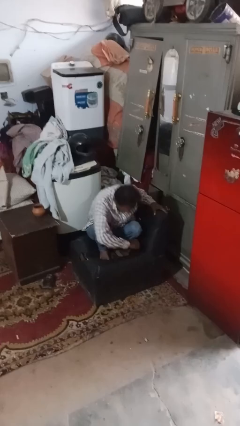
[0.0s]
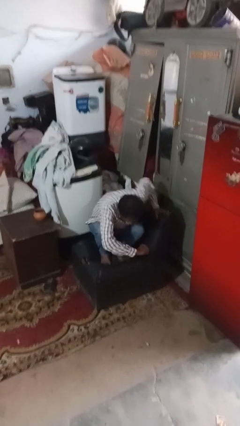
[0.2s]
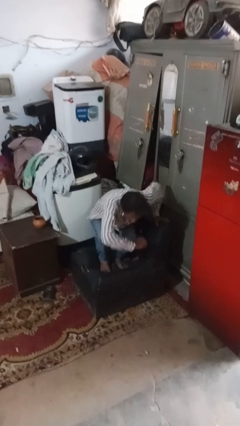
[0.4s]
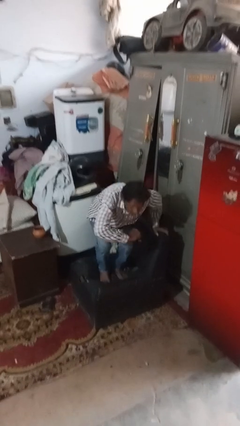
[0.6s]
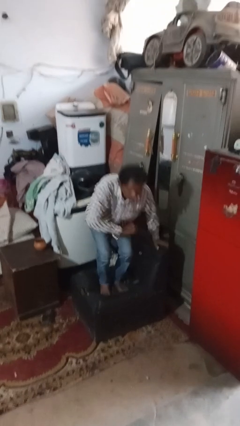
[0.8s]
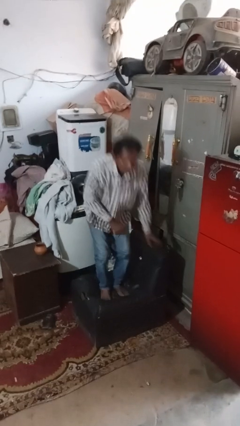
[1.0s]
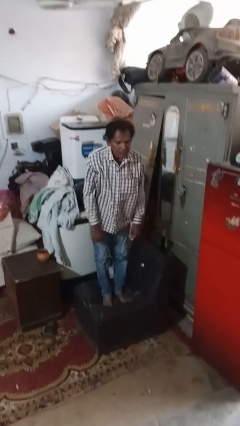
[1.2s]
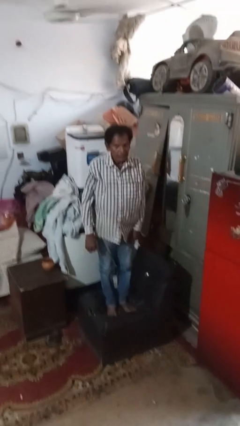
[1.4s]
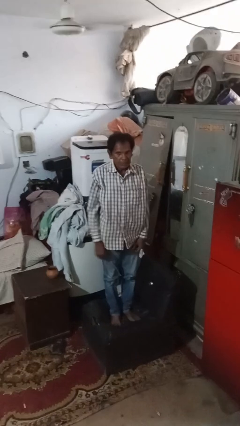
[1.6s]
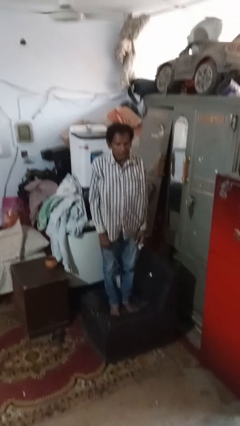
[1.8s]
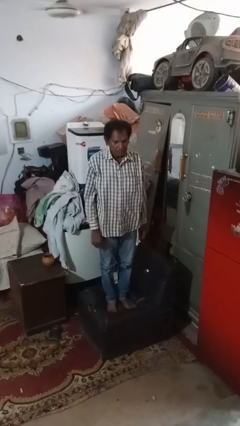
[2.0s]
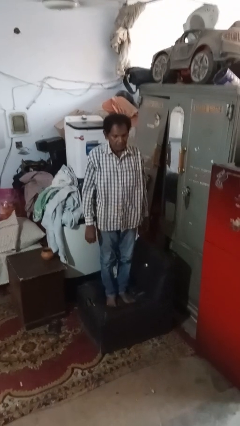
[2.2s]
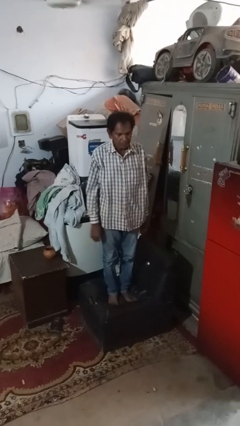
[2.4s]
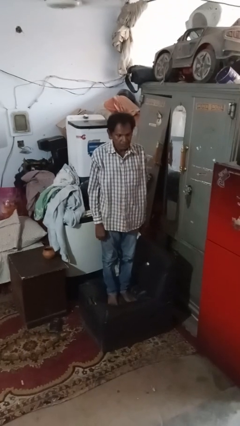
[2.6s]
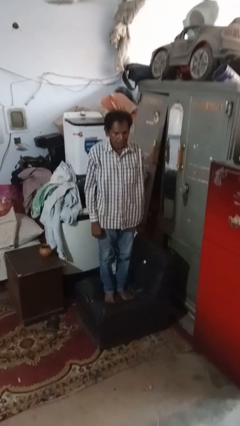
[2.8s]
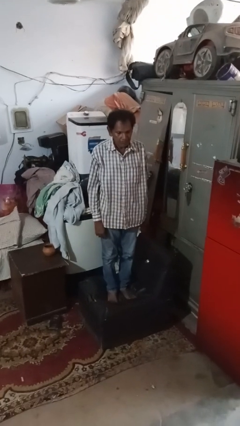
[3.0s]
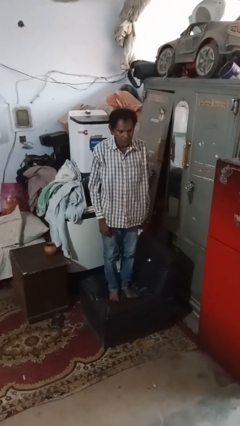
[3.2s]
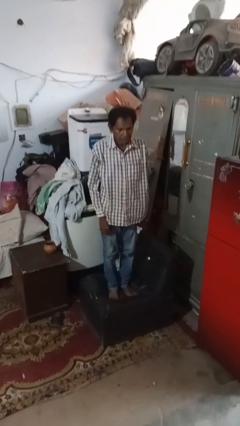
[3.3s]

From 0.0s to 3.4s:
person stands up

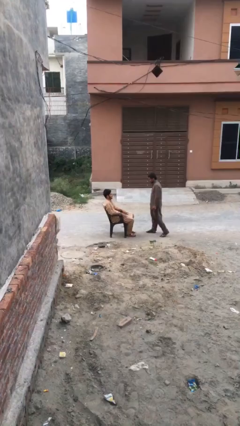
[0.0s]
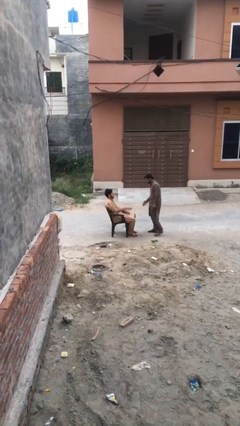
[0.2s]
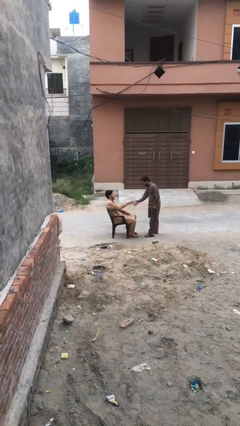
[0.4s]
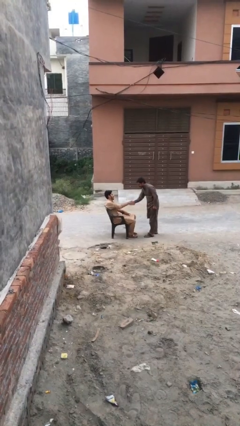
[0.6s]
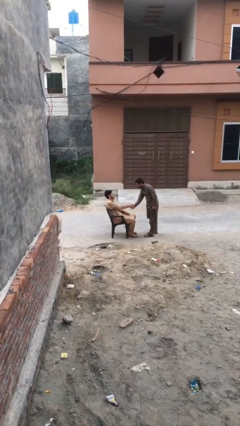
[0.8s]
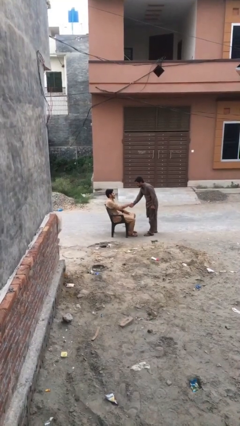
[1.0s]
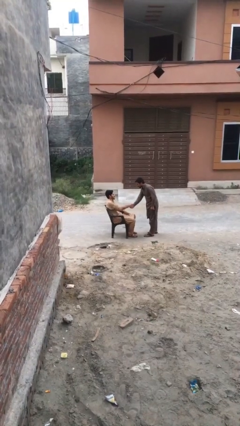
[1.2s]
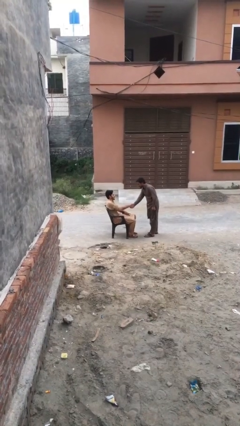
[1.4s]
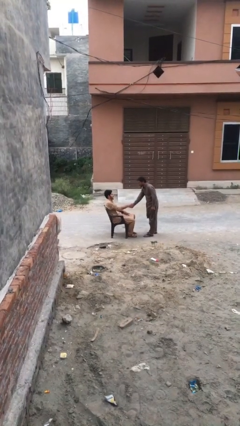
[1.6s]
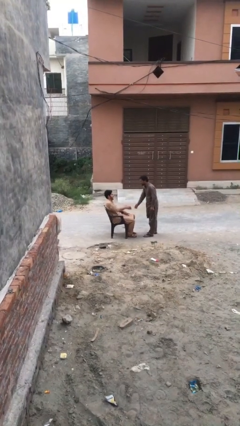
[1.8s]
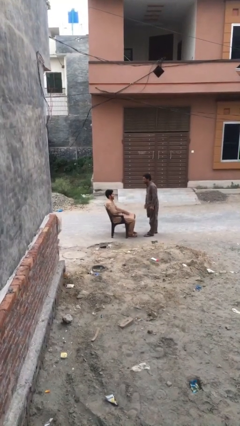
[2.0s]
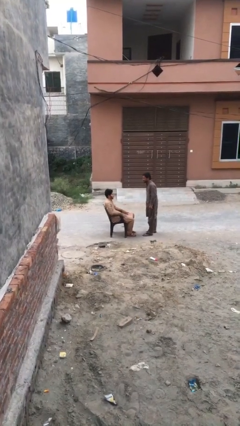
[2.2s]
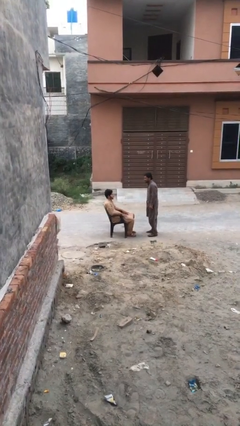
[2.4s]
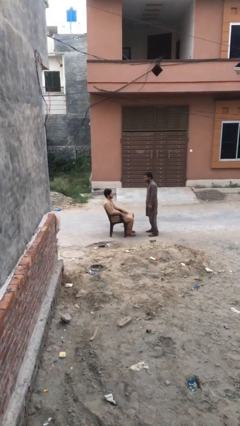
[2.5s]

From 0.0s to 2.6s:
person shakes hand

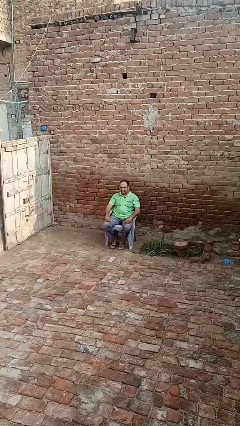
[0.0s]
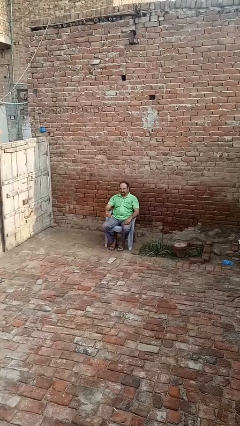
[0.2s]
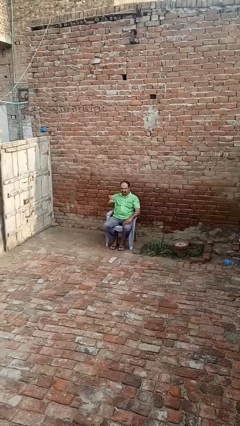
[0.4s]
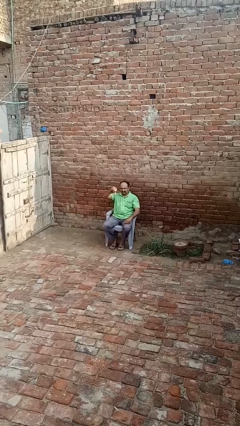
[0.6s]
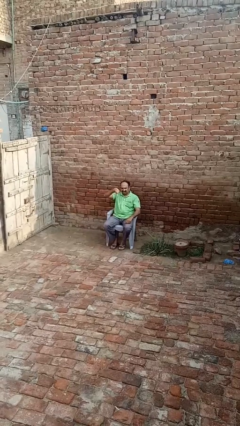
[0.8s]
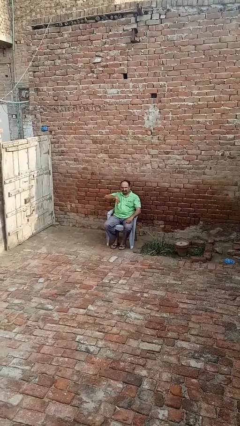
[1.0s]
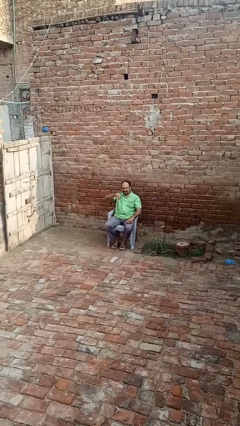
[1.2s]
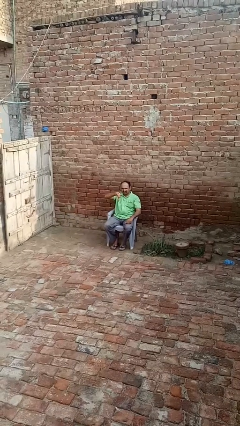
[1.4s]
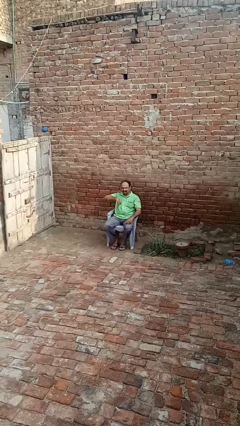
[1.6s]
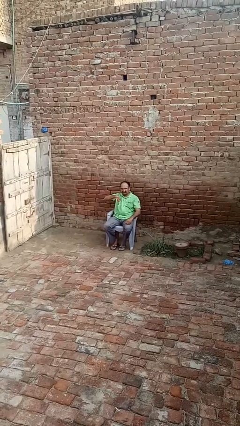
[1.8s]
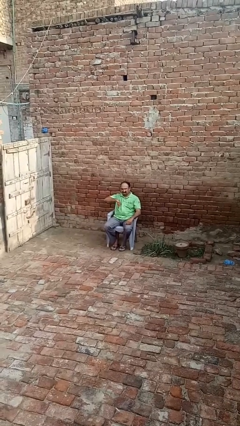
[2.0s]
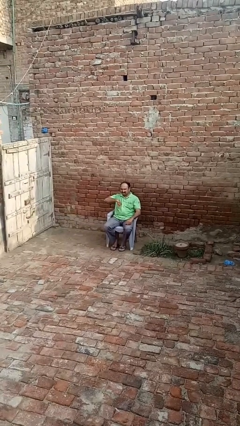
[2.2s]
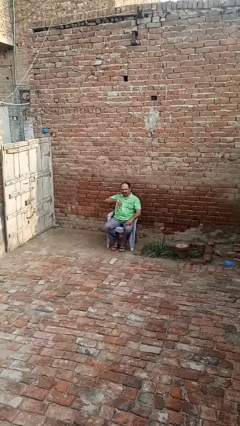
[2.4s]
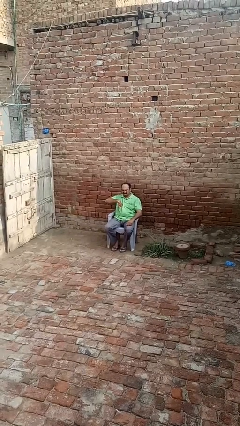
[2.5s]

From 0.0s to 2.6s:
person gestures thumbs down

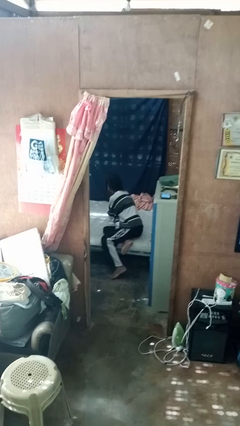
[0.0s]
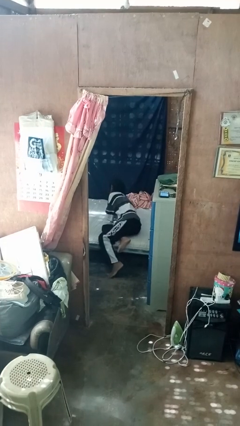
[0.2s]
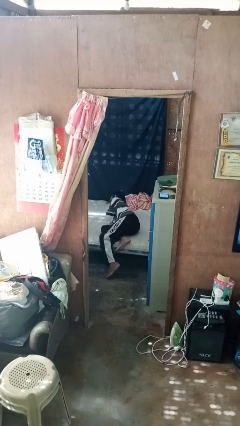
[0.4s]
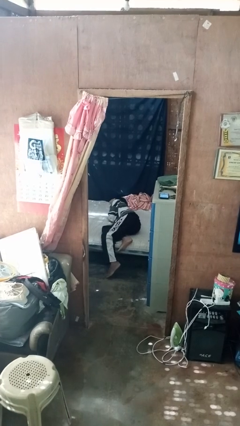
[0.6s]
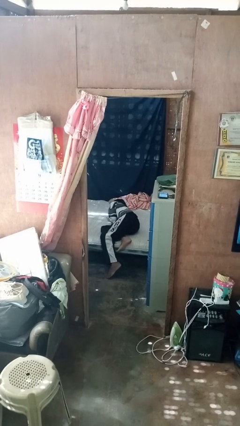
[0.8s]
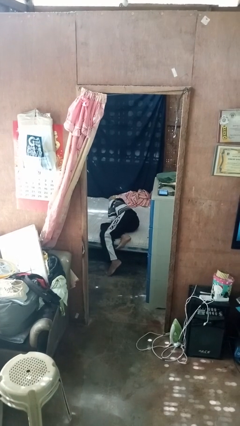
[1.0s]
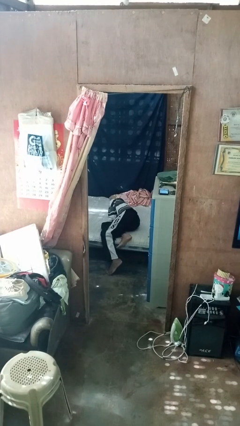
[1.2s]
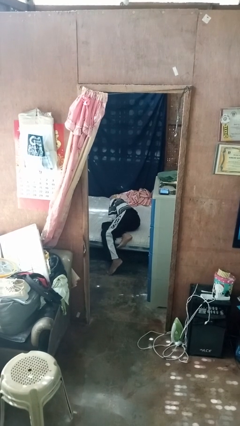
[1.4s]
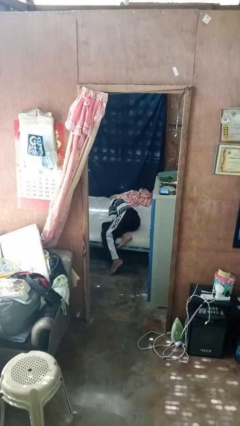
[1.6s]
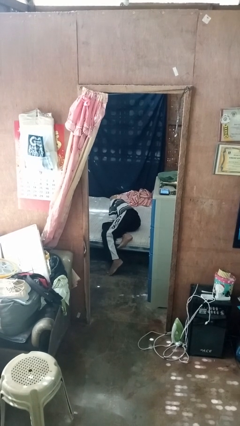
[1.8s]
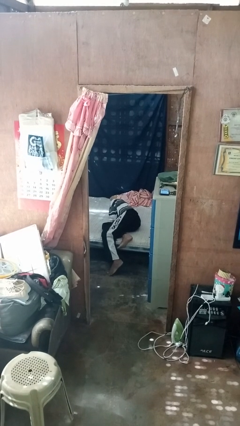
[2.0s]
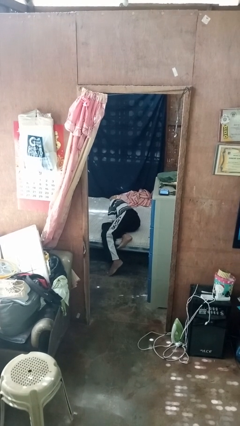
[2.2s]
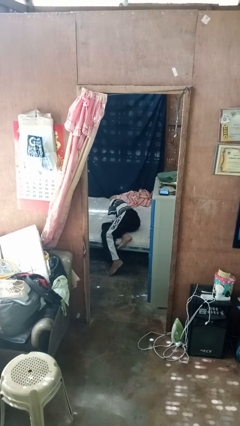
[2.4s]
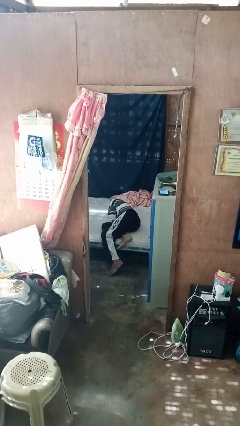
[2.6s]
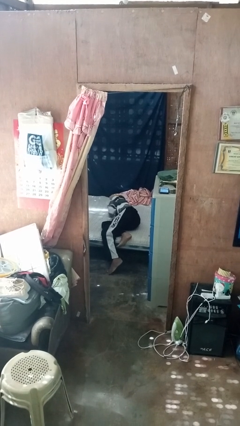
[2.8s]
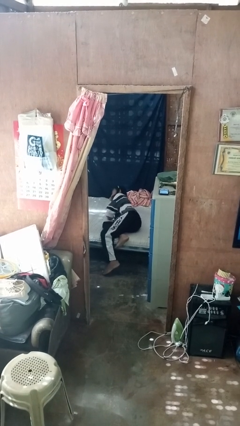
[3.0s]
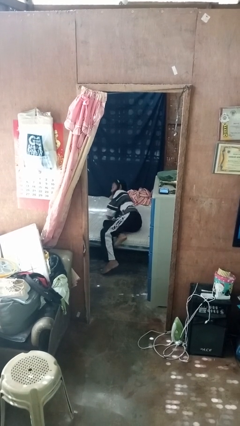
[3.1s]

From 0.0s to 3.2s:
person lies down on bed

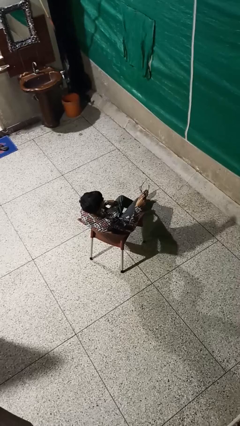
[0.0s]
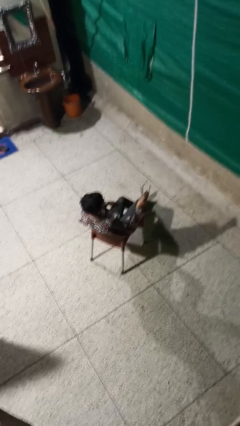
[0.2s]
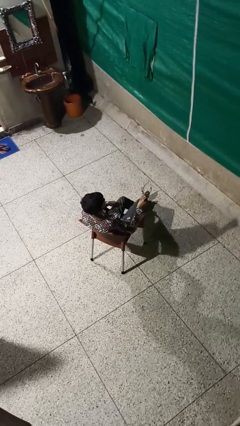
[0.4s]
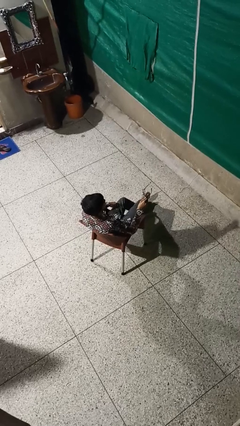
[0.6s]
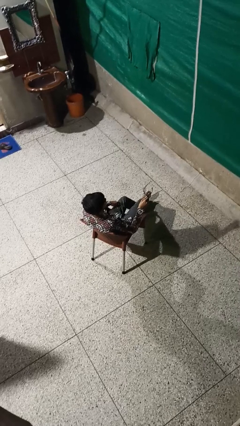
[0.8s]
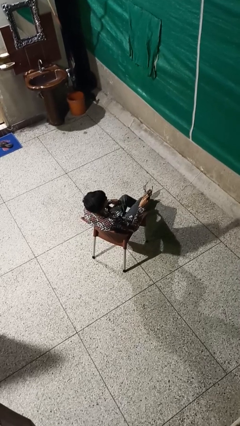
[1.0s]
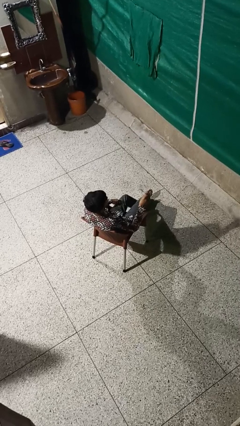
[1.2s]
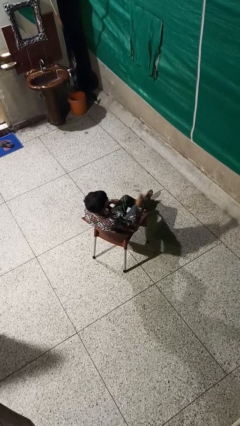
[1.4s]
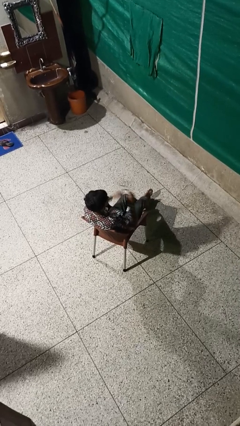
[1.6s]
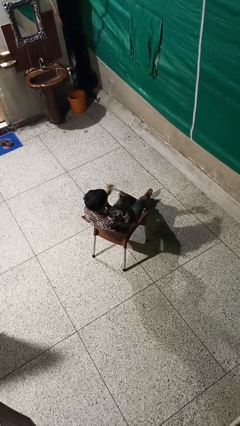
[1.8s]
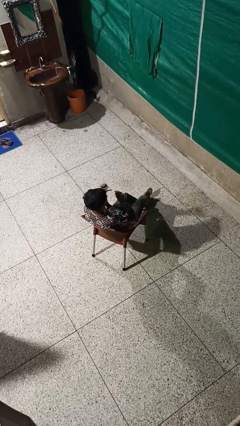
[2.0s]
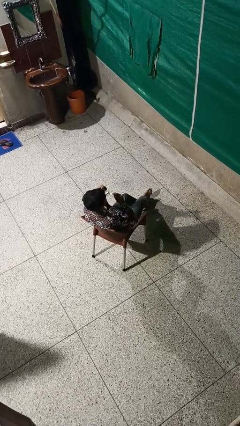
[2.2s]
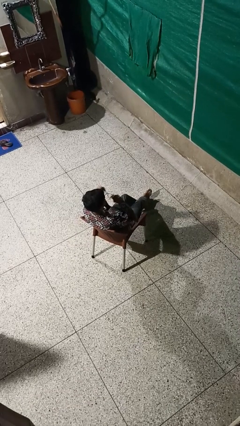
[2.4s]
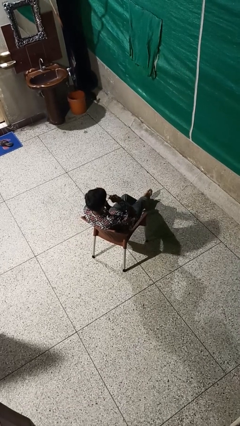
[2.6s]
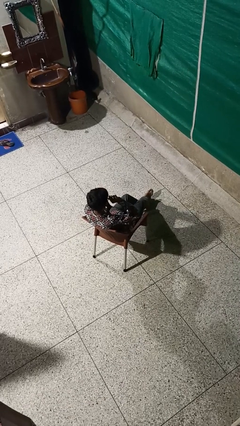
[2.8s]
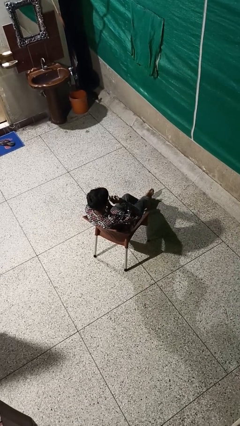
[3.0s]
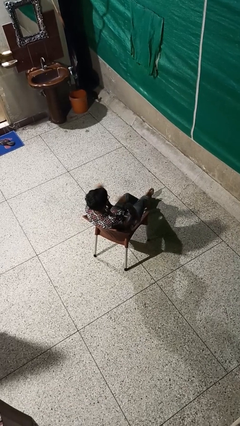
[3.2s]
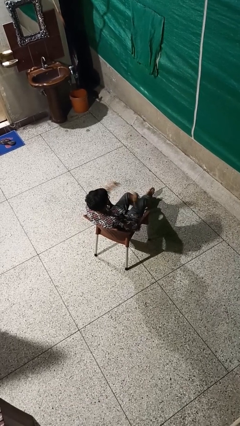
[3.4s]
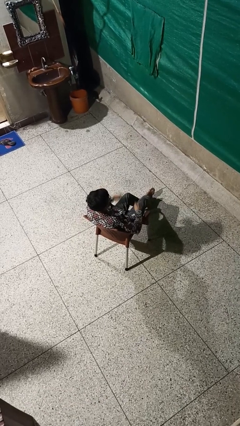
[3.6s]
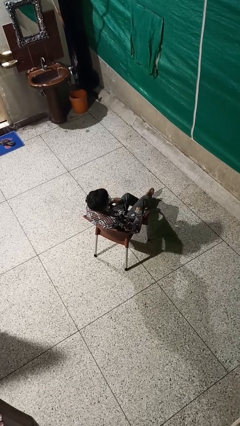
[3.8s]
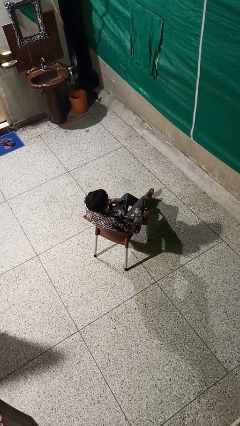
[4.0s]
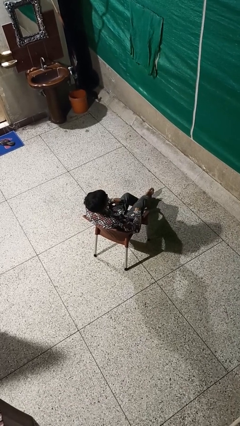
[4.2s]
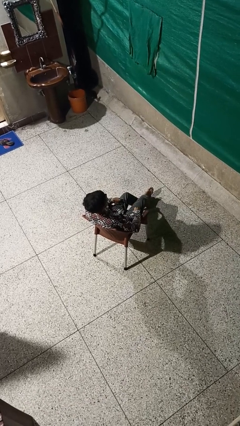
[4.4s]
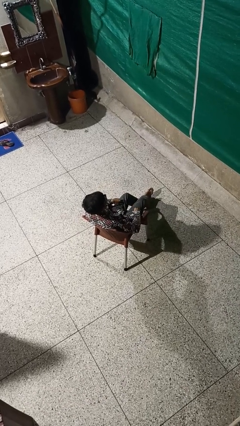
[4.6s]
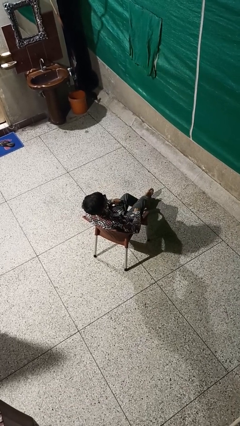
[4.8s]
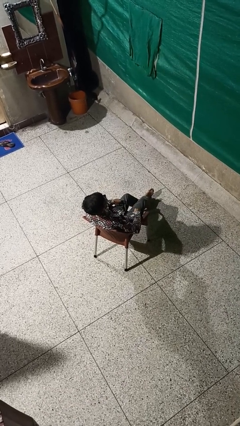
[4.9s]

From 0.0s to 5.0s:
person puts on glasses

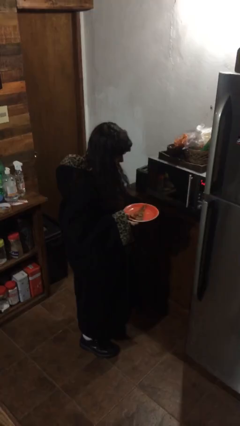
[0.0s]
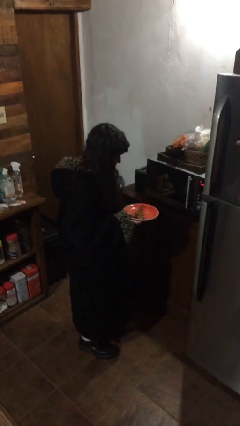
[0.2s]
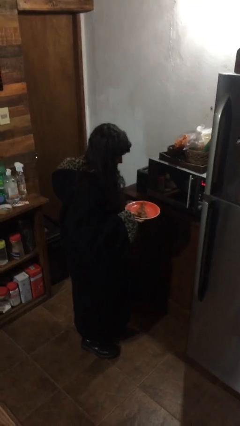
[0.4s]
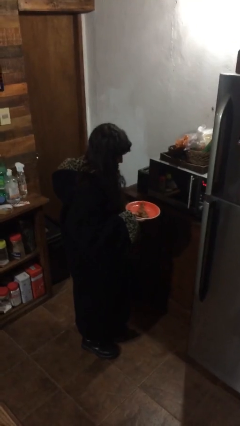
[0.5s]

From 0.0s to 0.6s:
person takes object from microwave
